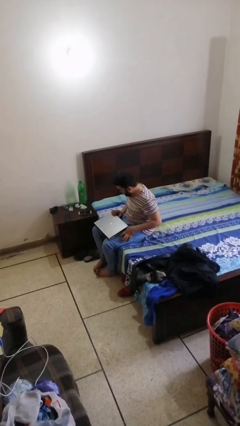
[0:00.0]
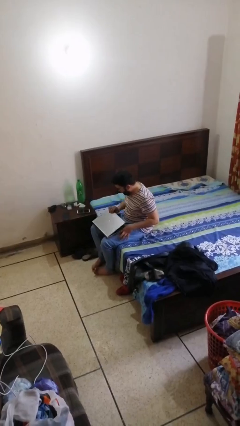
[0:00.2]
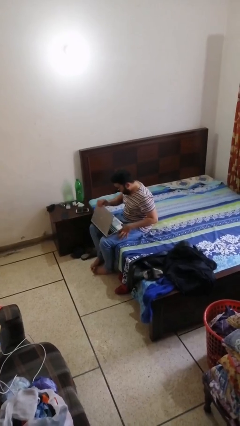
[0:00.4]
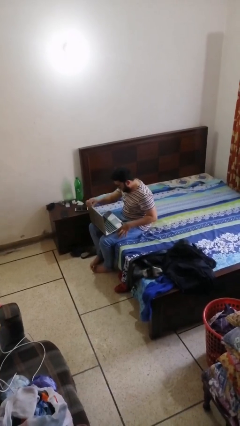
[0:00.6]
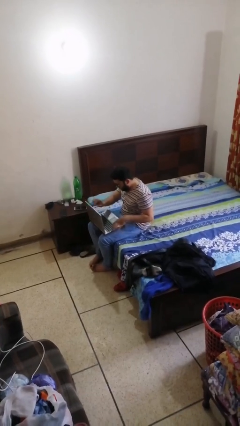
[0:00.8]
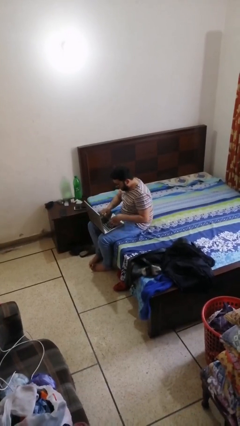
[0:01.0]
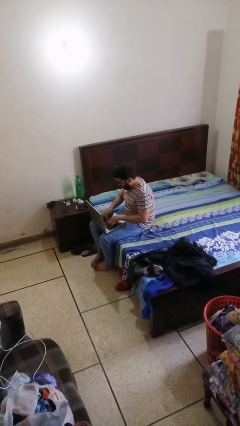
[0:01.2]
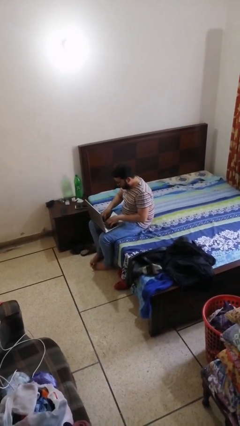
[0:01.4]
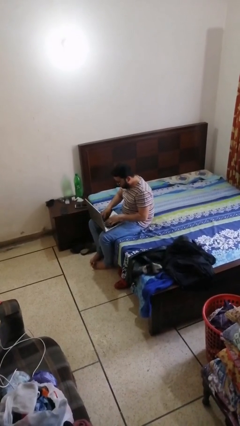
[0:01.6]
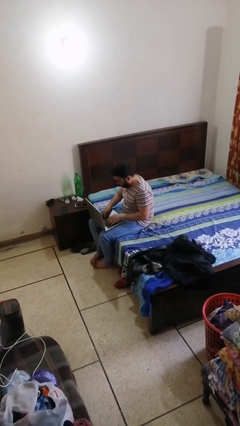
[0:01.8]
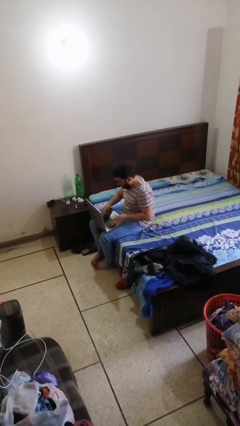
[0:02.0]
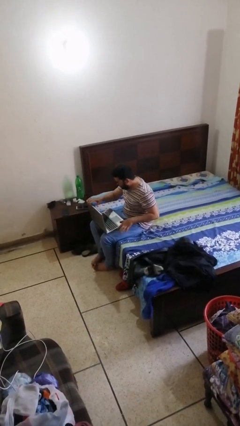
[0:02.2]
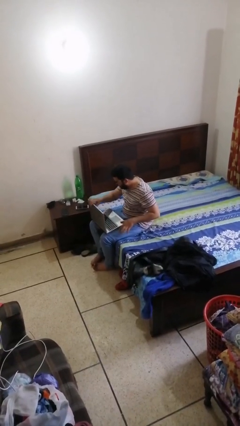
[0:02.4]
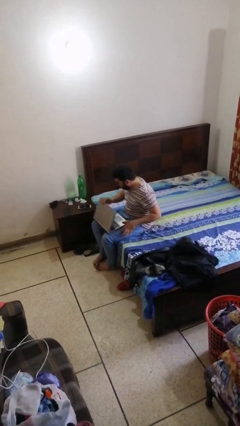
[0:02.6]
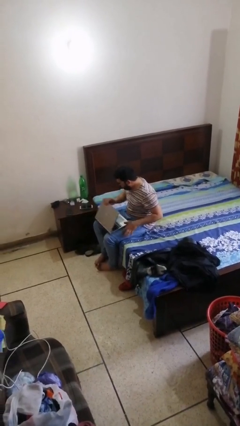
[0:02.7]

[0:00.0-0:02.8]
person interacts with laptop

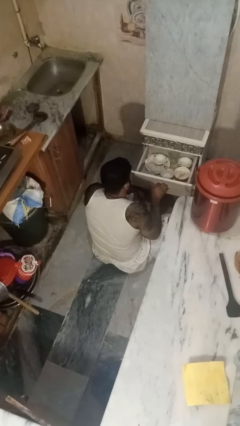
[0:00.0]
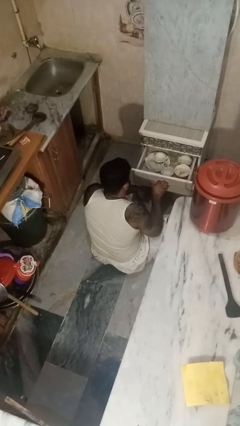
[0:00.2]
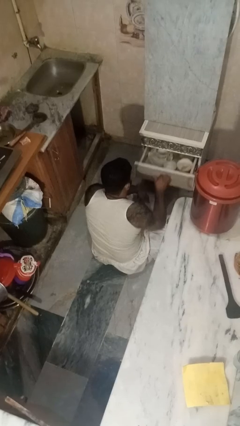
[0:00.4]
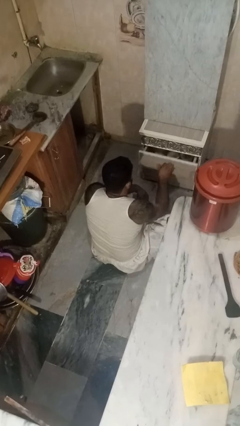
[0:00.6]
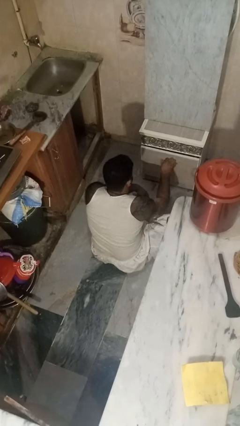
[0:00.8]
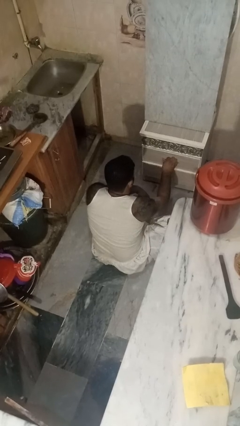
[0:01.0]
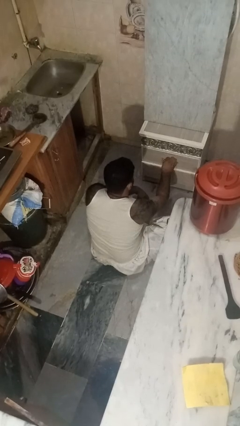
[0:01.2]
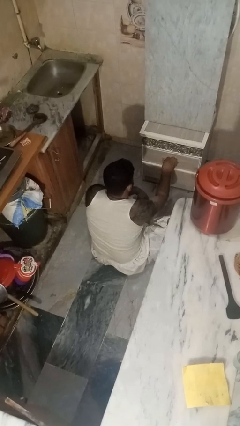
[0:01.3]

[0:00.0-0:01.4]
person closes kitchen drawer

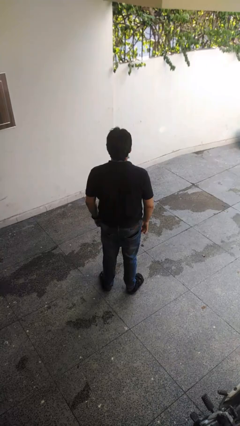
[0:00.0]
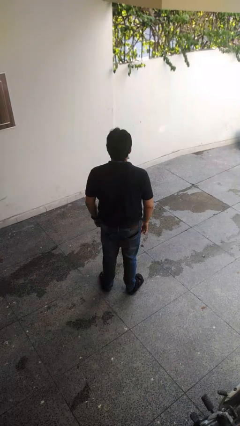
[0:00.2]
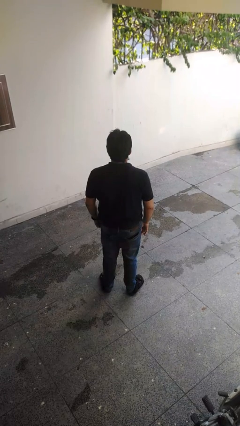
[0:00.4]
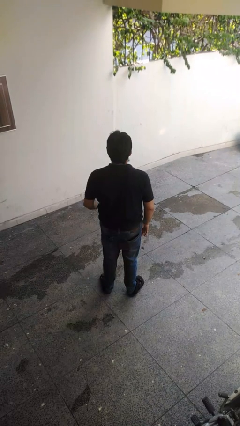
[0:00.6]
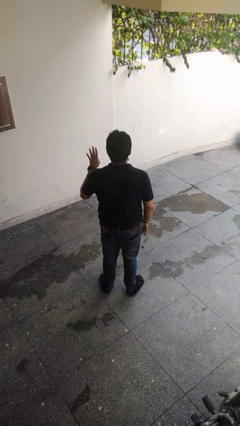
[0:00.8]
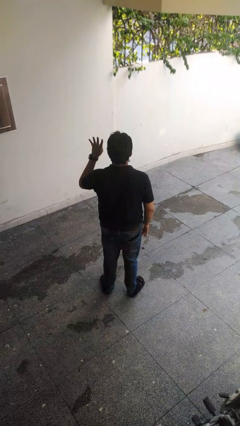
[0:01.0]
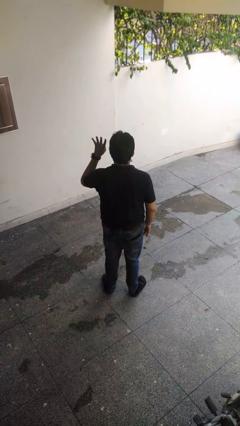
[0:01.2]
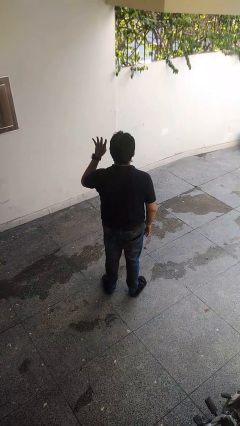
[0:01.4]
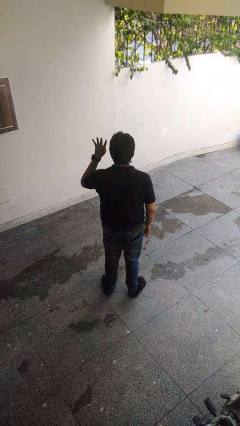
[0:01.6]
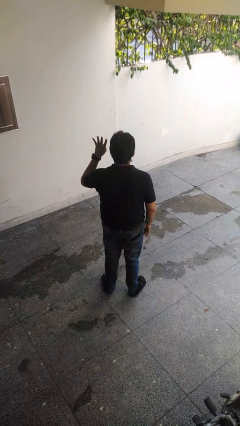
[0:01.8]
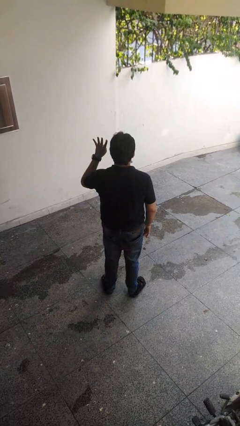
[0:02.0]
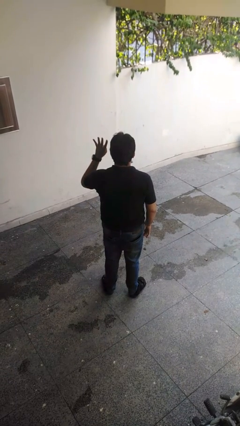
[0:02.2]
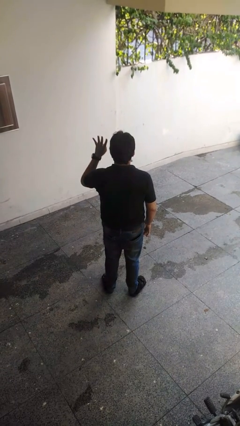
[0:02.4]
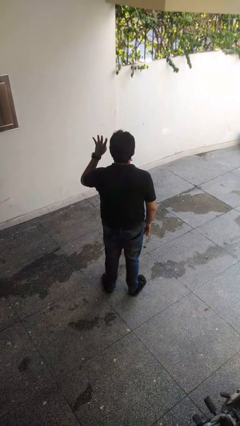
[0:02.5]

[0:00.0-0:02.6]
person gestures number four

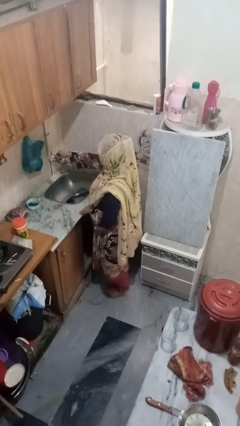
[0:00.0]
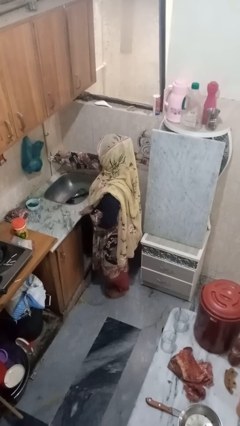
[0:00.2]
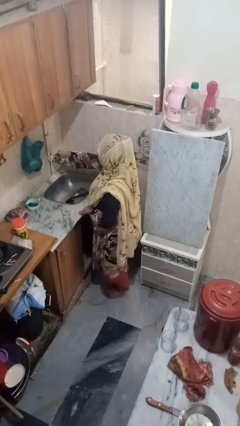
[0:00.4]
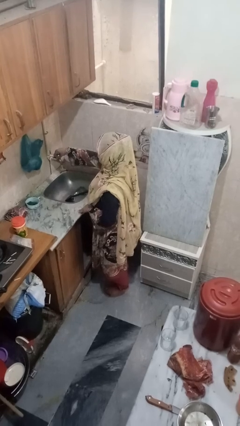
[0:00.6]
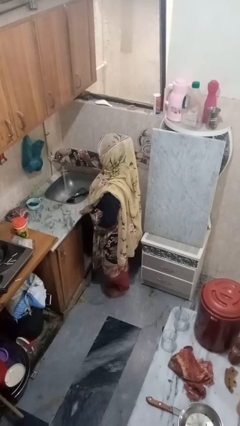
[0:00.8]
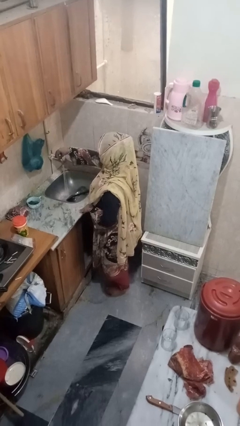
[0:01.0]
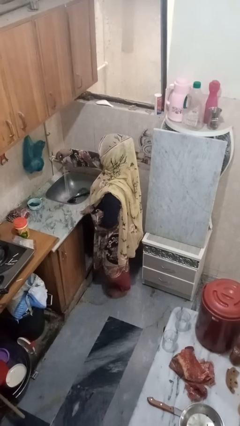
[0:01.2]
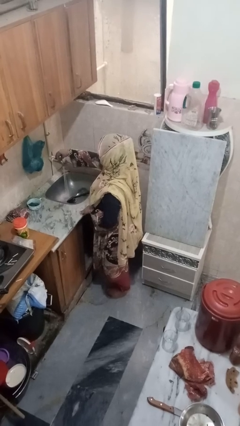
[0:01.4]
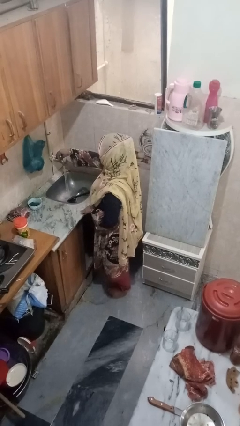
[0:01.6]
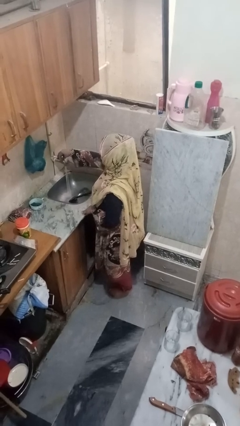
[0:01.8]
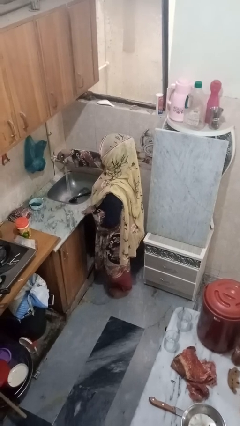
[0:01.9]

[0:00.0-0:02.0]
person turns on faucet

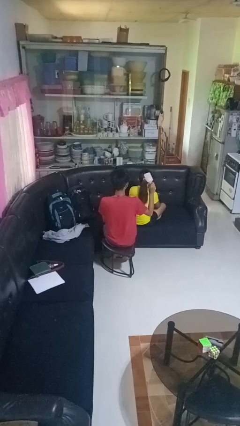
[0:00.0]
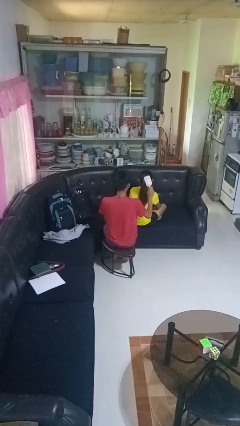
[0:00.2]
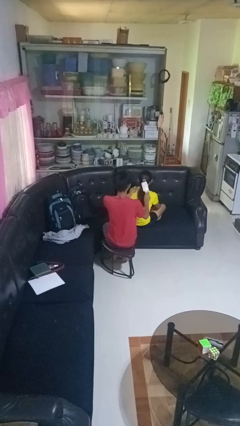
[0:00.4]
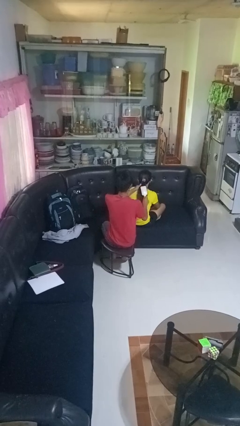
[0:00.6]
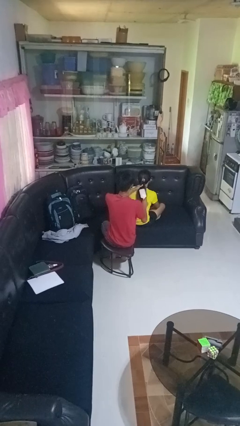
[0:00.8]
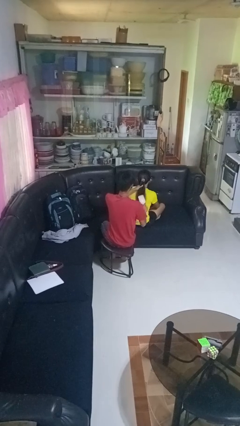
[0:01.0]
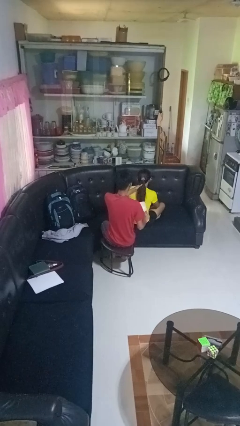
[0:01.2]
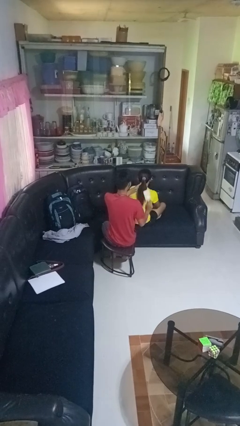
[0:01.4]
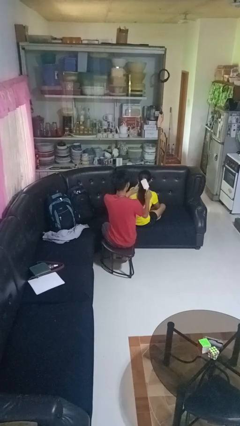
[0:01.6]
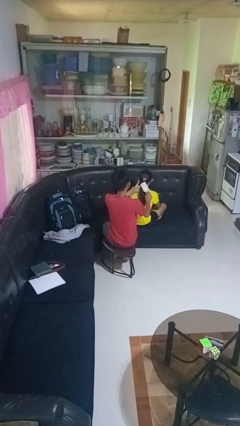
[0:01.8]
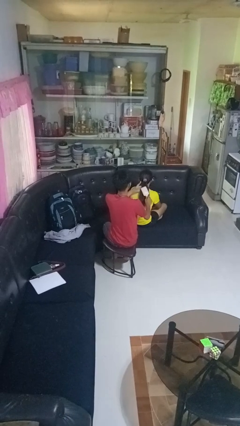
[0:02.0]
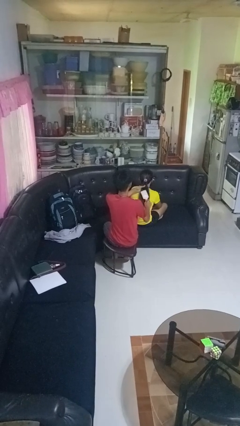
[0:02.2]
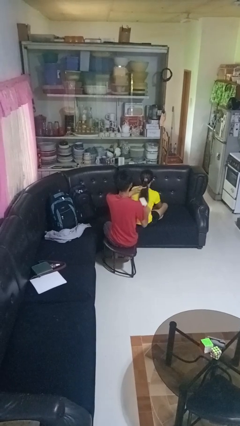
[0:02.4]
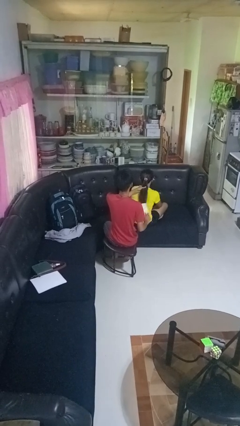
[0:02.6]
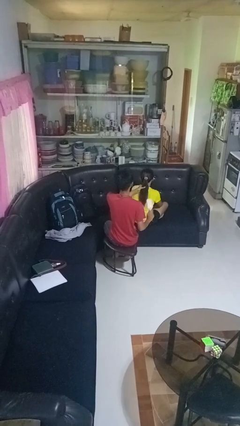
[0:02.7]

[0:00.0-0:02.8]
person brushes hair of person

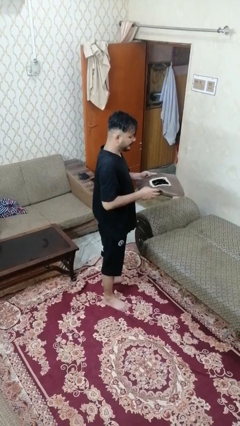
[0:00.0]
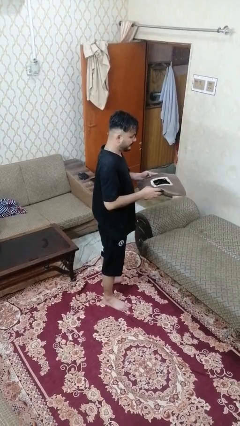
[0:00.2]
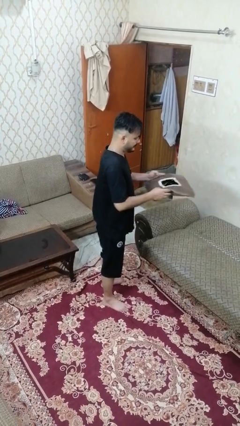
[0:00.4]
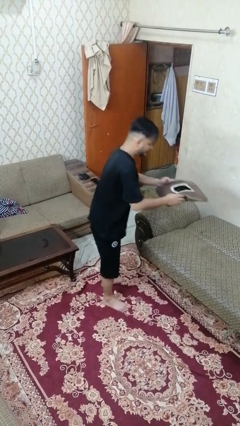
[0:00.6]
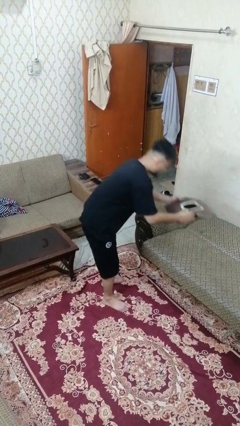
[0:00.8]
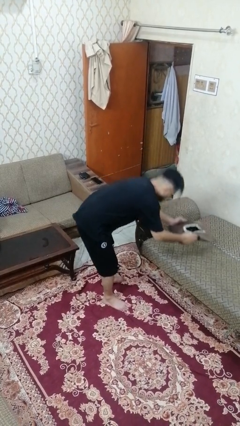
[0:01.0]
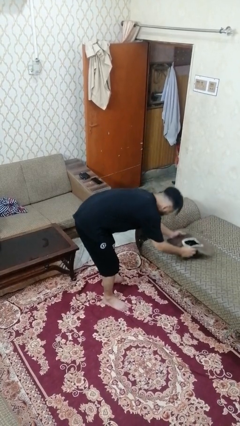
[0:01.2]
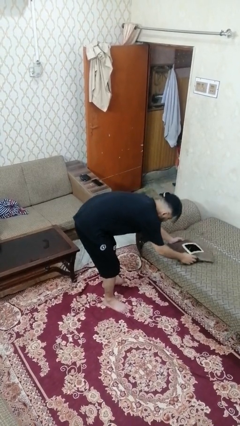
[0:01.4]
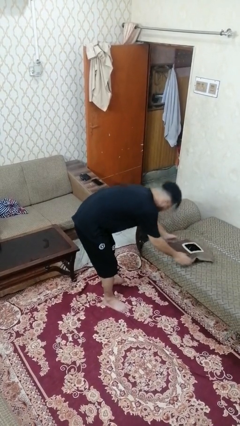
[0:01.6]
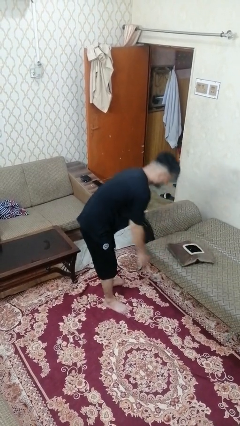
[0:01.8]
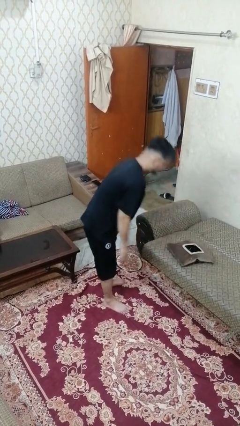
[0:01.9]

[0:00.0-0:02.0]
person puts down object on couch

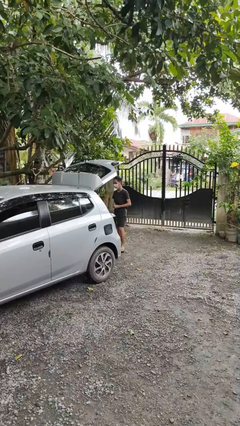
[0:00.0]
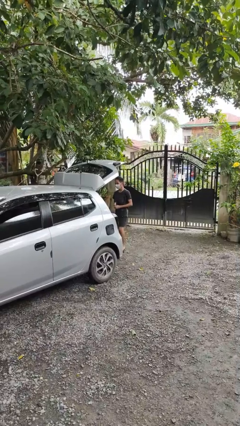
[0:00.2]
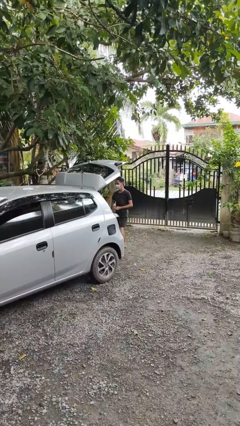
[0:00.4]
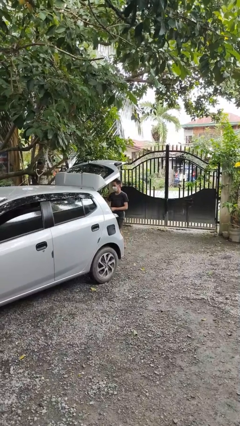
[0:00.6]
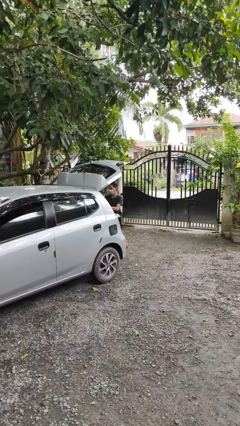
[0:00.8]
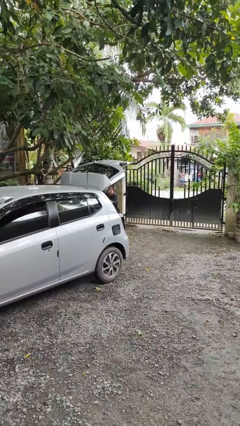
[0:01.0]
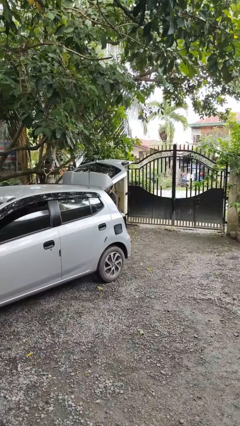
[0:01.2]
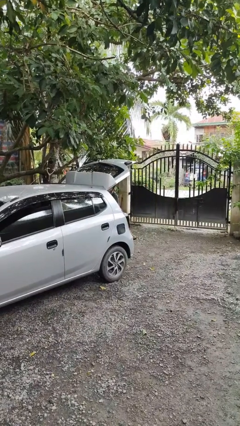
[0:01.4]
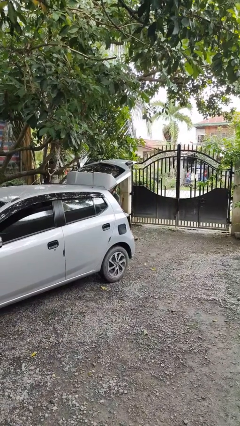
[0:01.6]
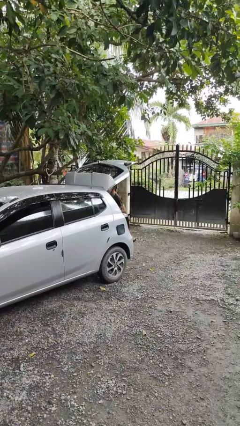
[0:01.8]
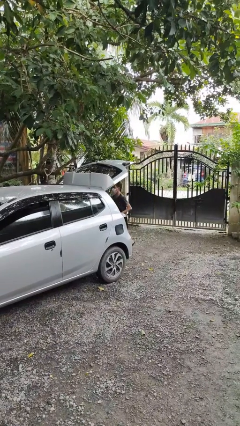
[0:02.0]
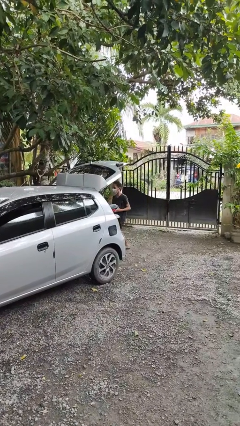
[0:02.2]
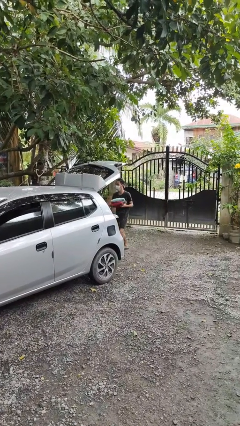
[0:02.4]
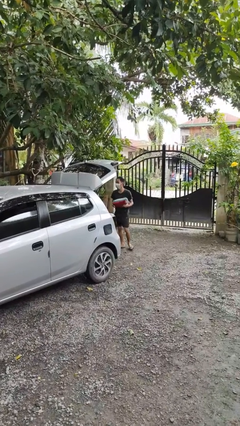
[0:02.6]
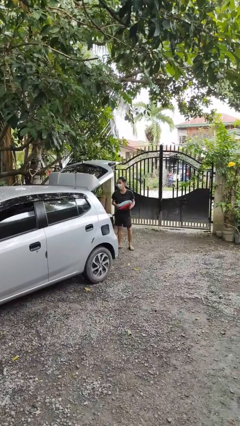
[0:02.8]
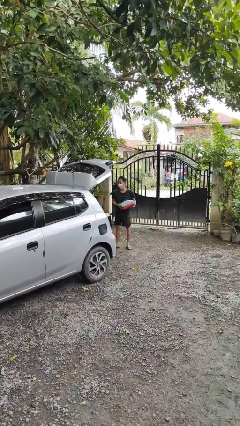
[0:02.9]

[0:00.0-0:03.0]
person unloads car
